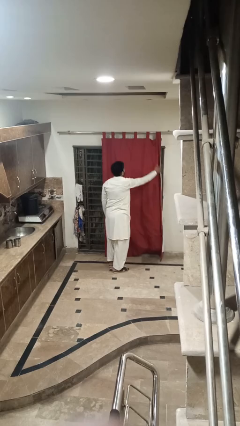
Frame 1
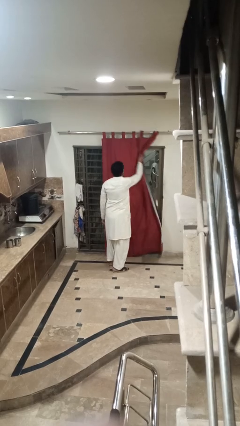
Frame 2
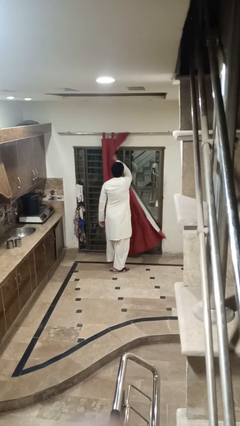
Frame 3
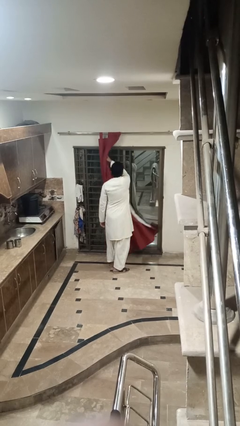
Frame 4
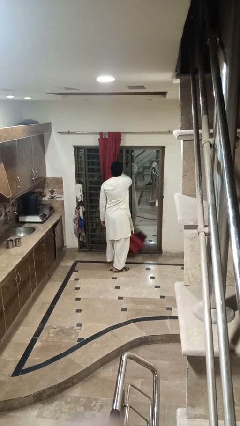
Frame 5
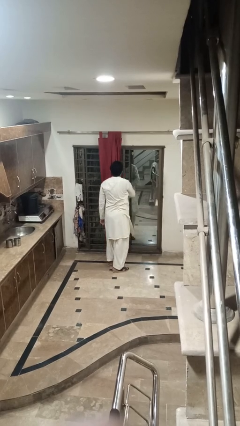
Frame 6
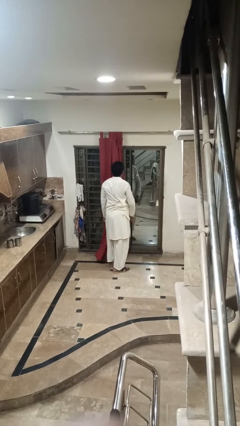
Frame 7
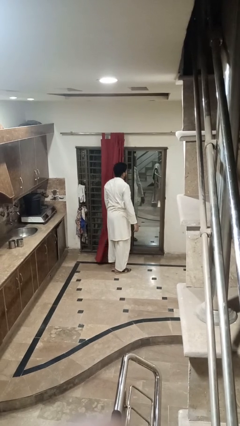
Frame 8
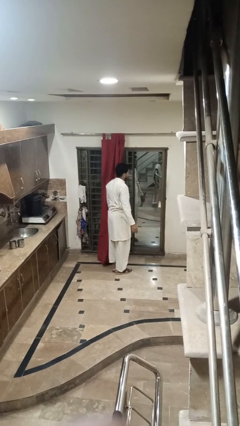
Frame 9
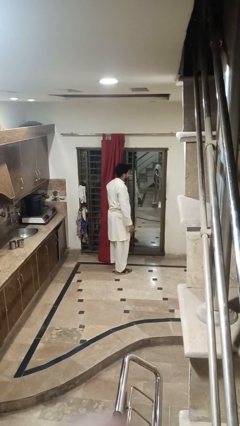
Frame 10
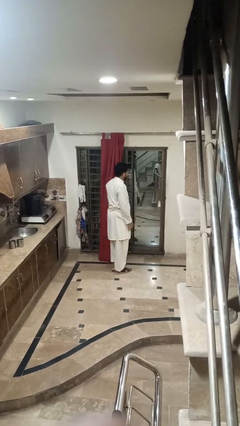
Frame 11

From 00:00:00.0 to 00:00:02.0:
person opens curtains

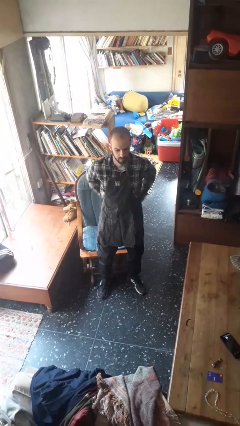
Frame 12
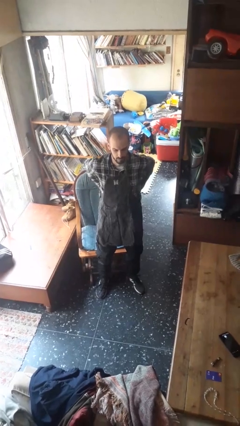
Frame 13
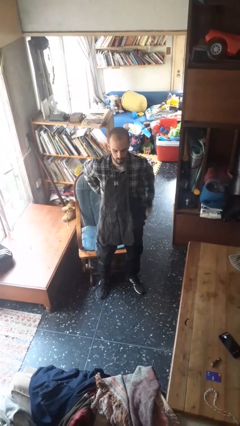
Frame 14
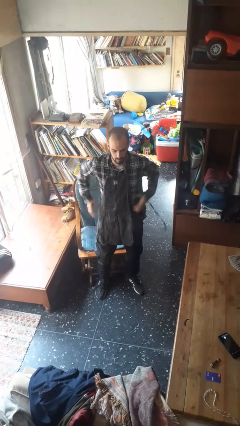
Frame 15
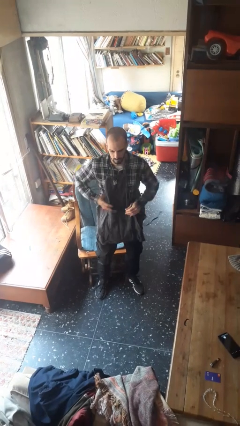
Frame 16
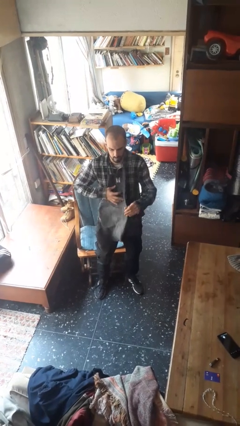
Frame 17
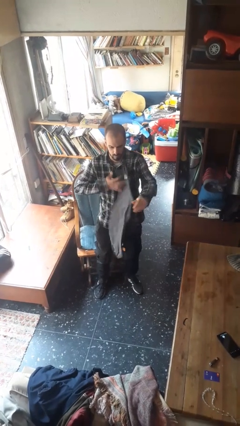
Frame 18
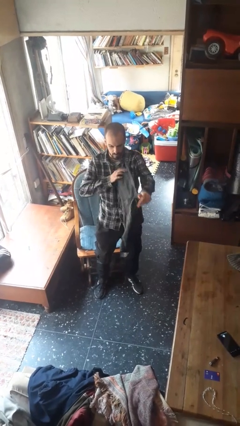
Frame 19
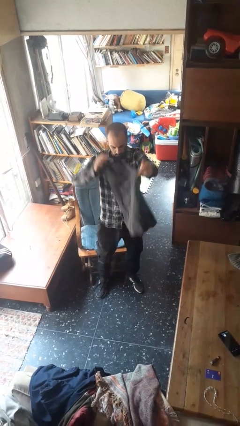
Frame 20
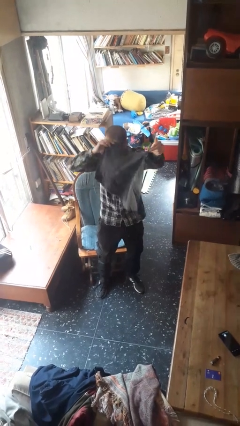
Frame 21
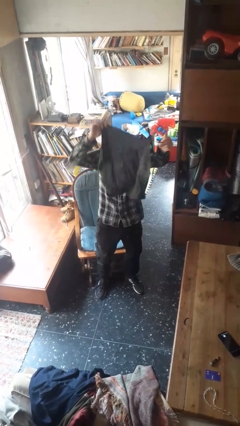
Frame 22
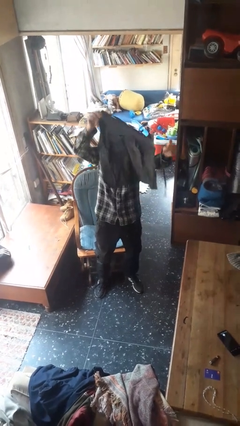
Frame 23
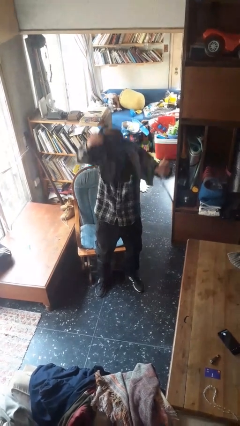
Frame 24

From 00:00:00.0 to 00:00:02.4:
person takes off apron

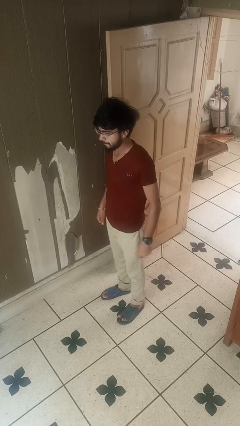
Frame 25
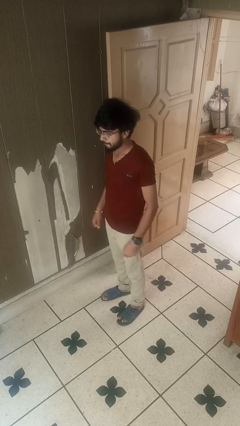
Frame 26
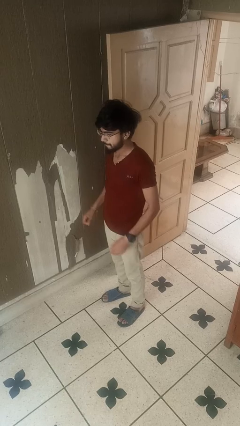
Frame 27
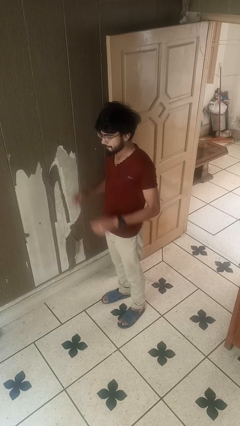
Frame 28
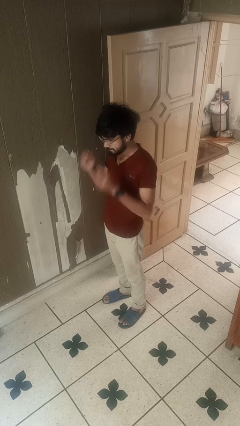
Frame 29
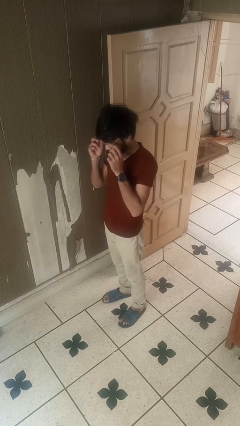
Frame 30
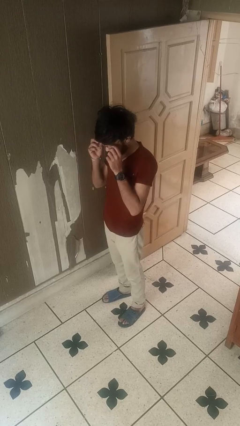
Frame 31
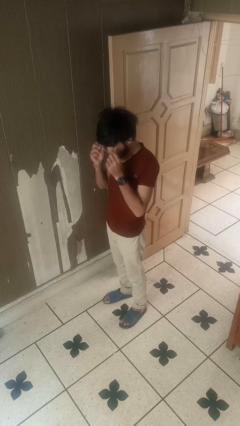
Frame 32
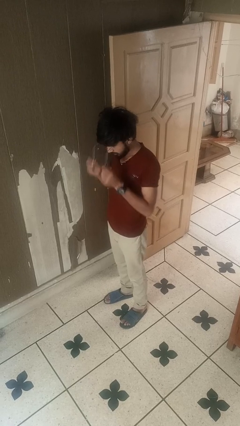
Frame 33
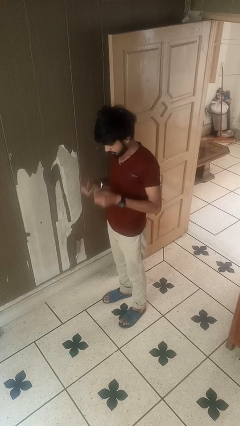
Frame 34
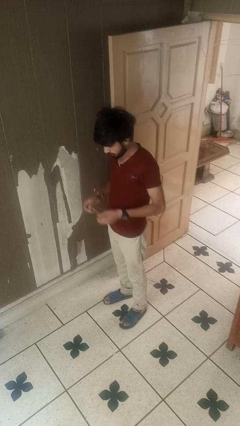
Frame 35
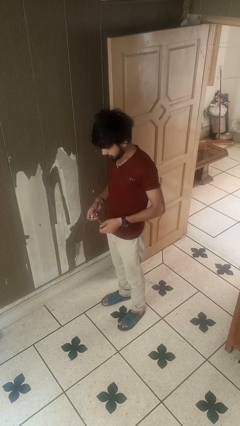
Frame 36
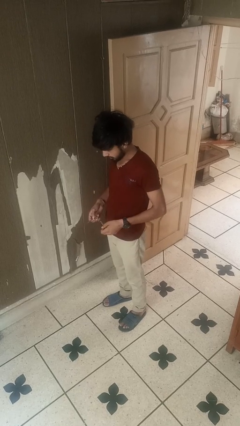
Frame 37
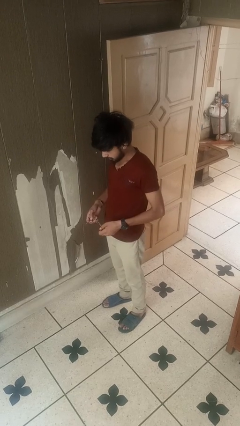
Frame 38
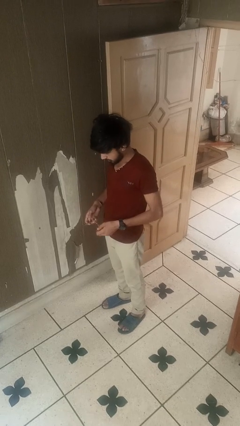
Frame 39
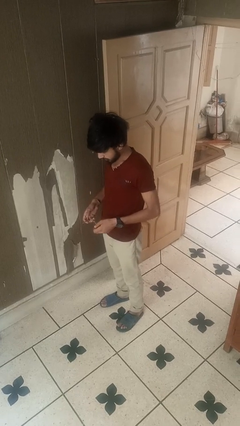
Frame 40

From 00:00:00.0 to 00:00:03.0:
person takes off glasses

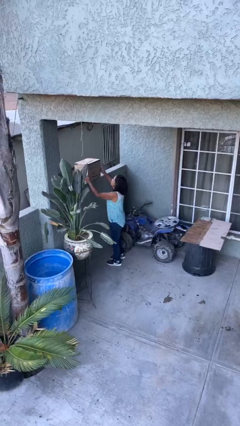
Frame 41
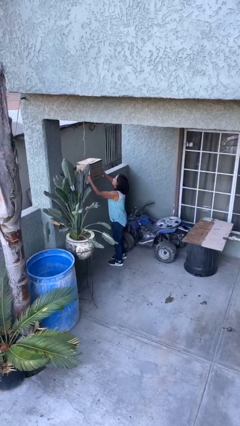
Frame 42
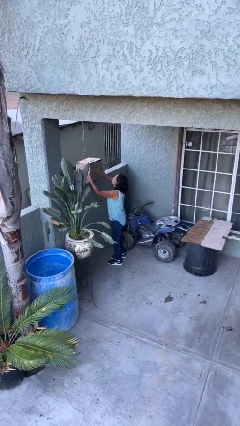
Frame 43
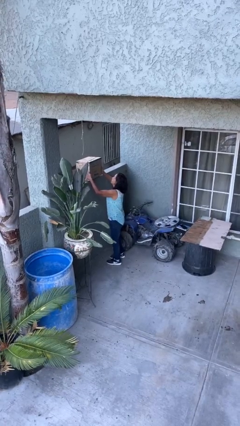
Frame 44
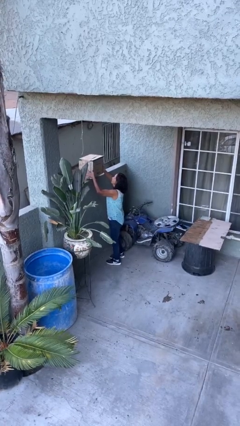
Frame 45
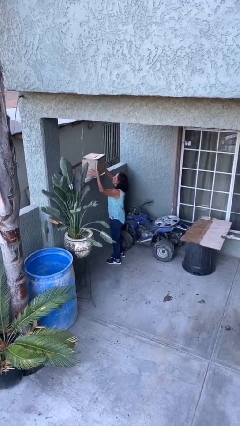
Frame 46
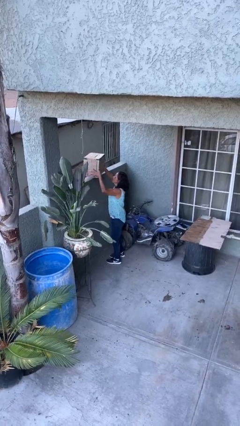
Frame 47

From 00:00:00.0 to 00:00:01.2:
person picks up object from shelf

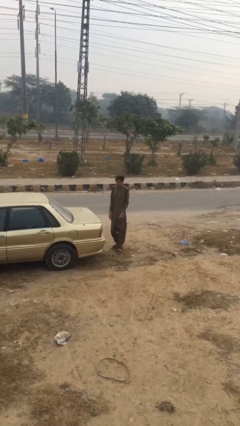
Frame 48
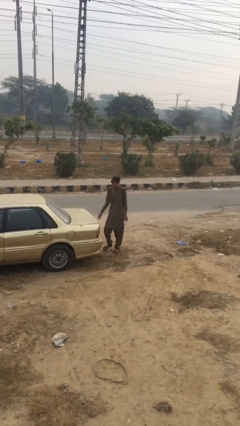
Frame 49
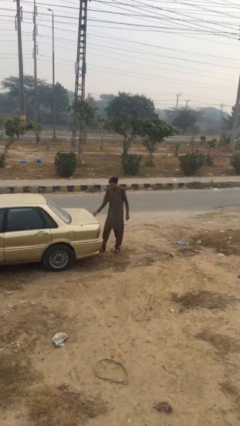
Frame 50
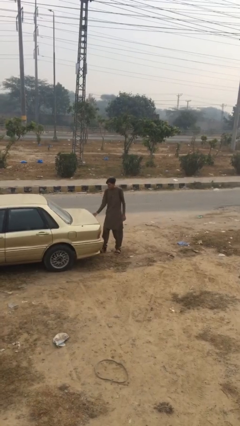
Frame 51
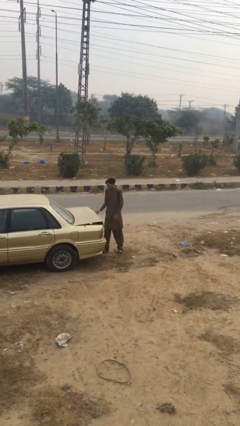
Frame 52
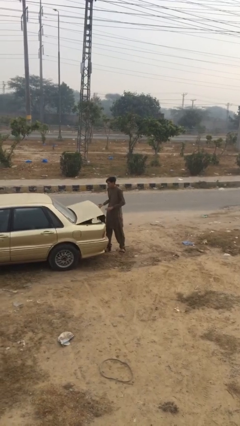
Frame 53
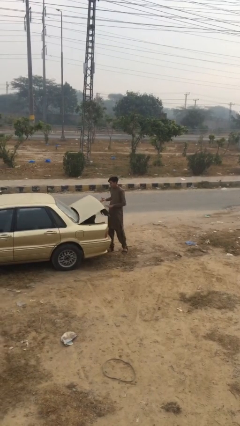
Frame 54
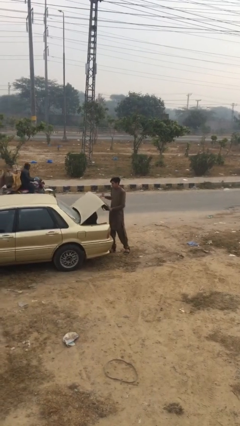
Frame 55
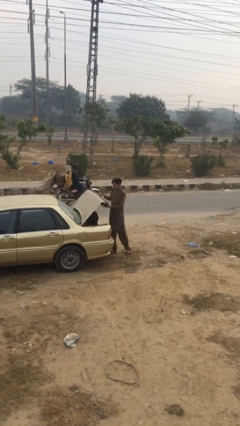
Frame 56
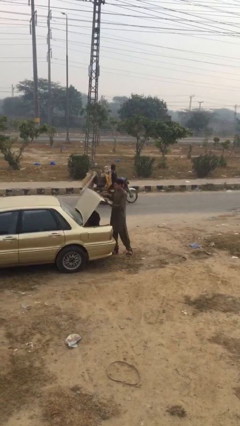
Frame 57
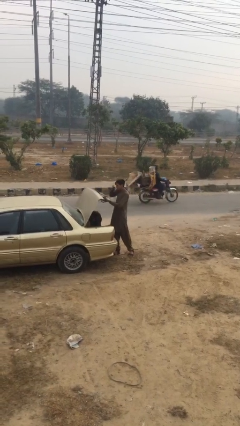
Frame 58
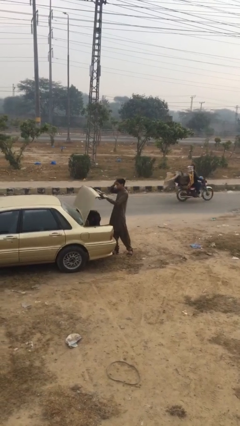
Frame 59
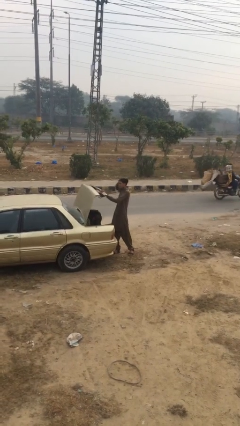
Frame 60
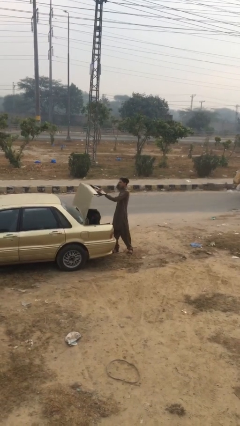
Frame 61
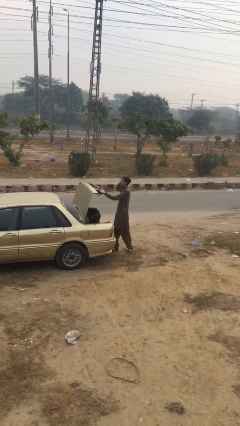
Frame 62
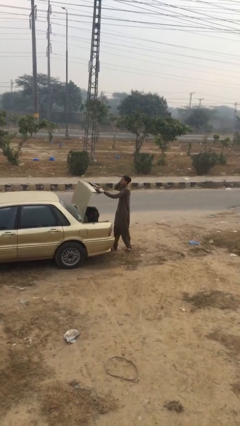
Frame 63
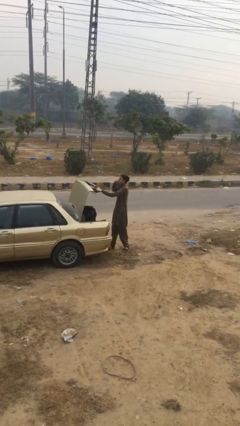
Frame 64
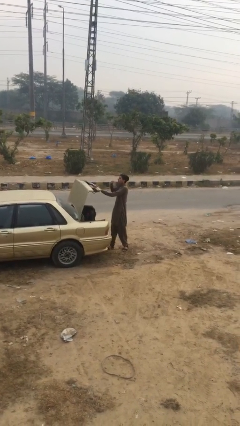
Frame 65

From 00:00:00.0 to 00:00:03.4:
person opens car trunk

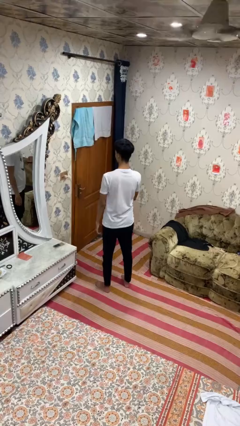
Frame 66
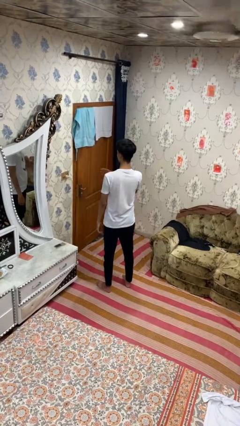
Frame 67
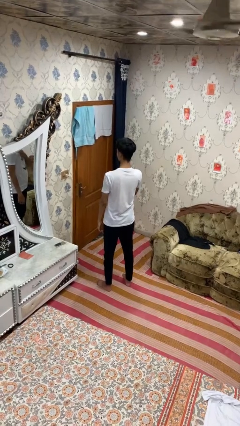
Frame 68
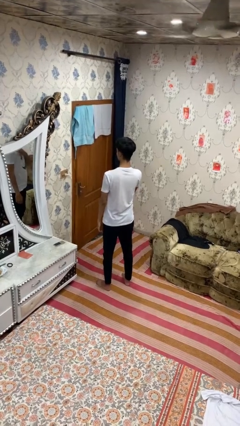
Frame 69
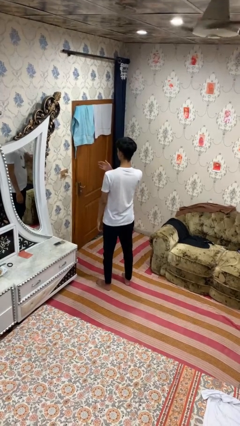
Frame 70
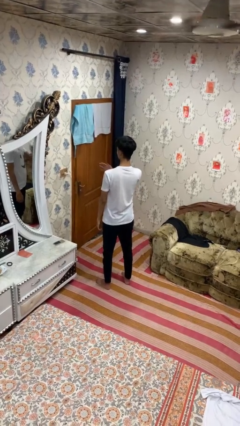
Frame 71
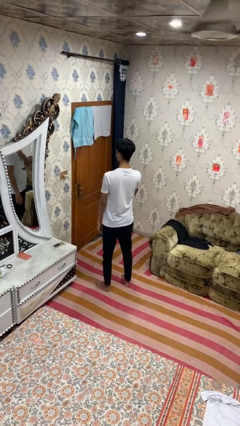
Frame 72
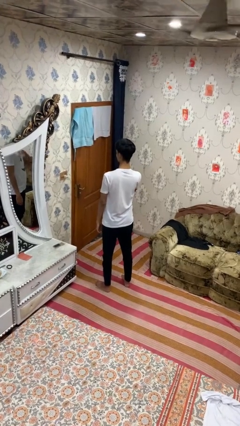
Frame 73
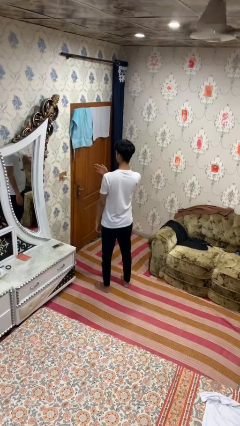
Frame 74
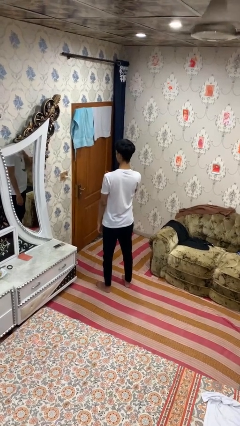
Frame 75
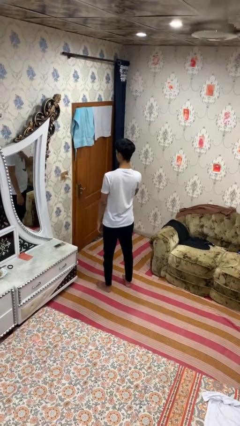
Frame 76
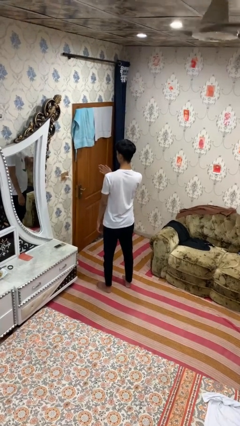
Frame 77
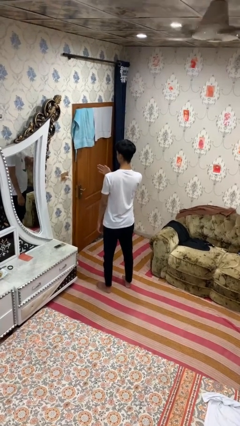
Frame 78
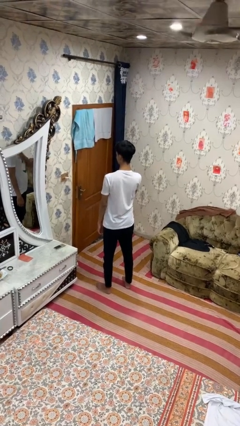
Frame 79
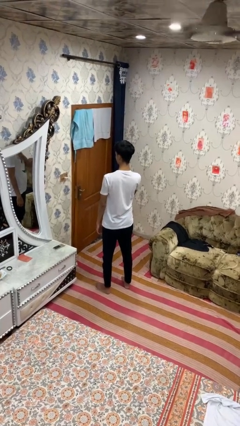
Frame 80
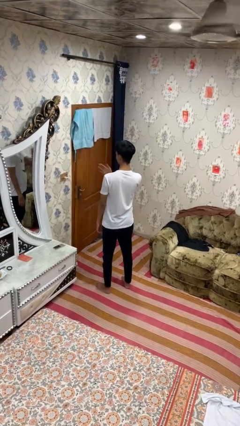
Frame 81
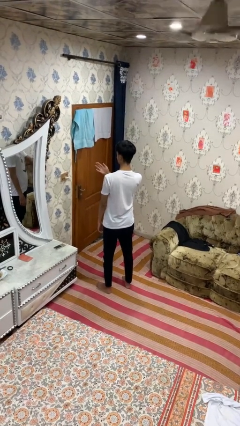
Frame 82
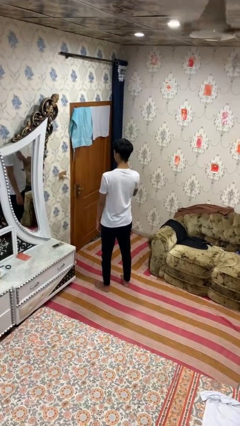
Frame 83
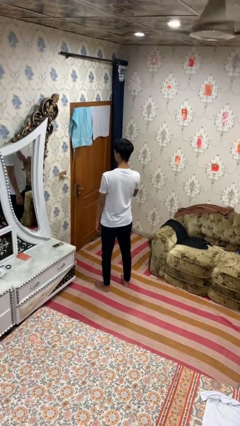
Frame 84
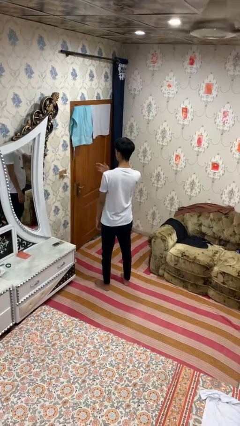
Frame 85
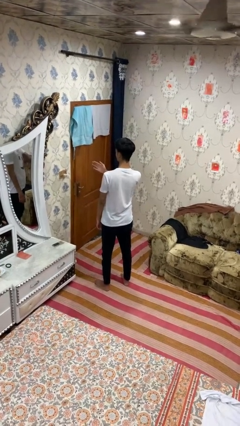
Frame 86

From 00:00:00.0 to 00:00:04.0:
person drums on chest

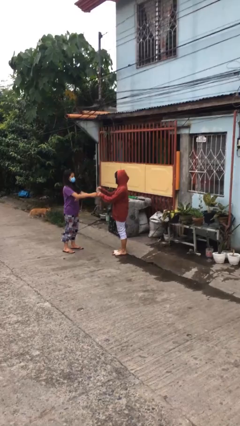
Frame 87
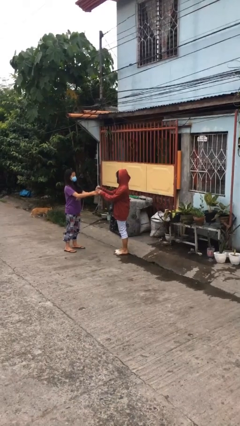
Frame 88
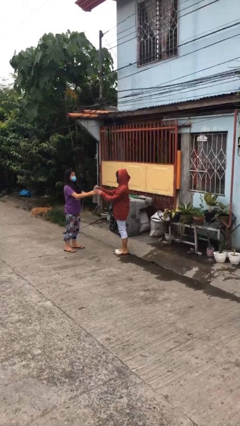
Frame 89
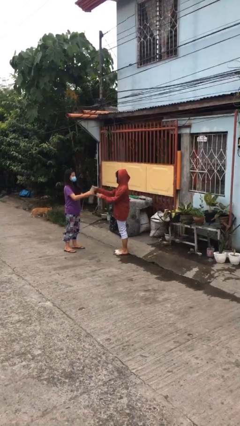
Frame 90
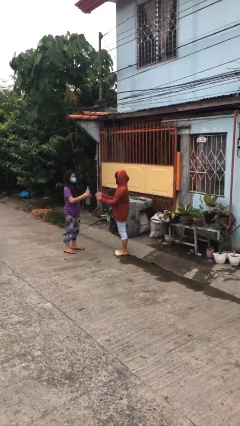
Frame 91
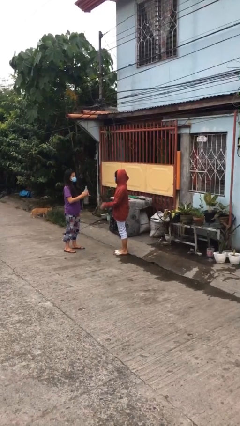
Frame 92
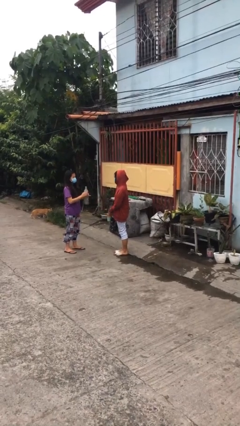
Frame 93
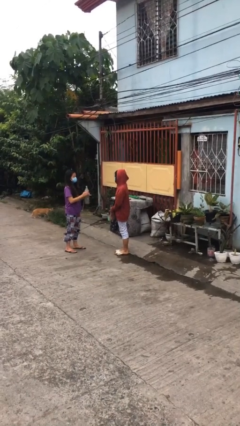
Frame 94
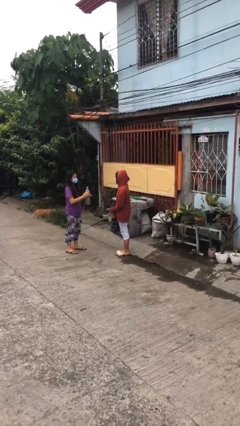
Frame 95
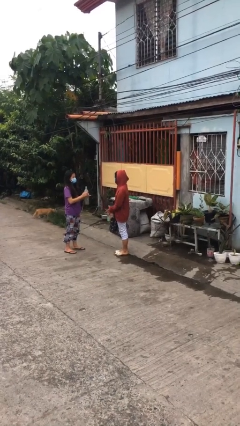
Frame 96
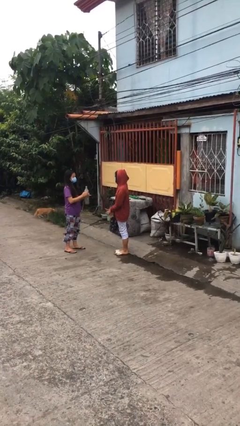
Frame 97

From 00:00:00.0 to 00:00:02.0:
person transfers object to person
